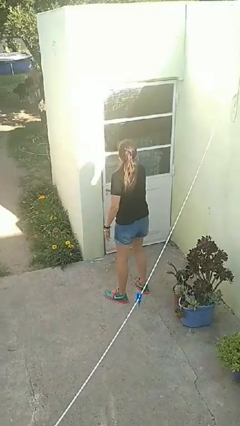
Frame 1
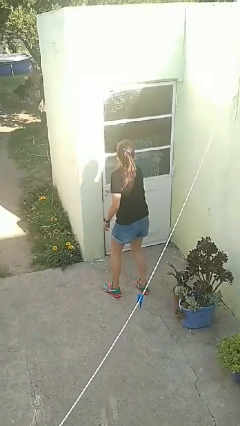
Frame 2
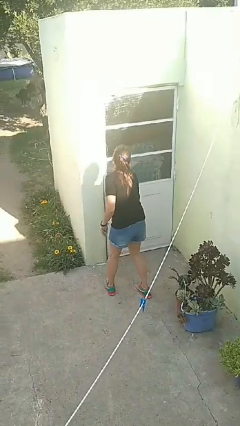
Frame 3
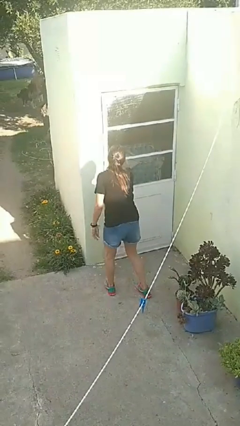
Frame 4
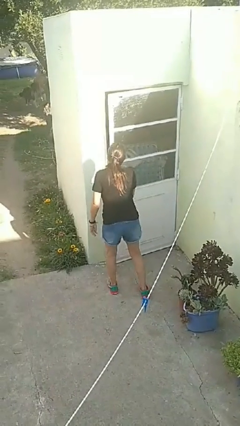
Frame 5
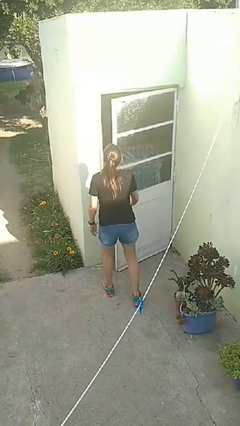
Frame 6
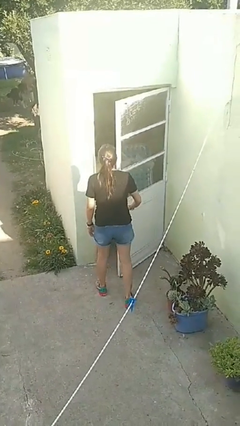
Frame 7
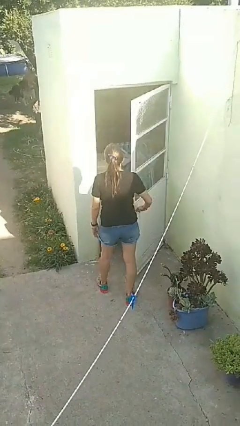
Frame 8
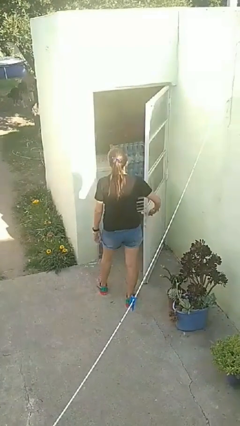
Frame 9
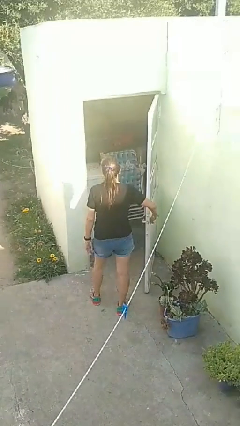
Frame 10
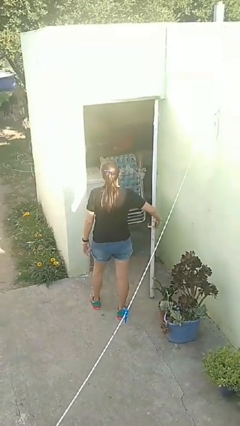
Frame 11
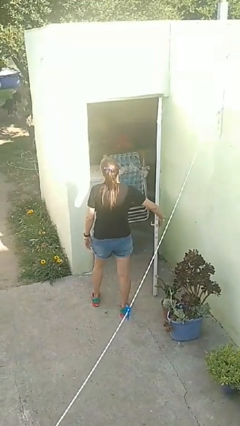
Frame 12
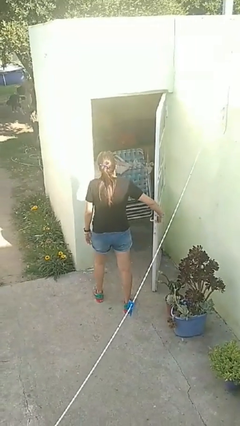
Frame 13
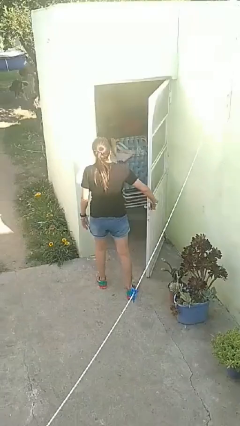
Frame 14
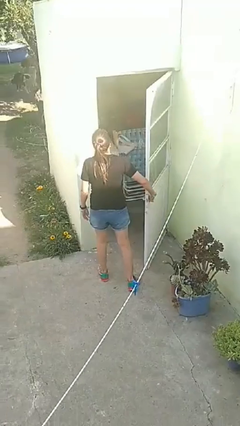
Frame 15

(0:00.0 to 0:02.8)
person opens facility door

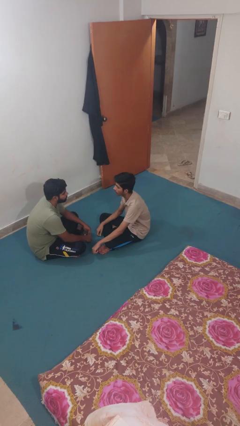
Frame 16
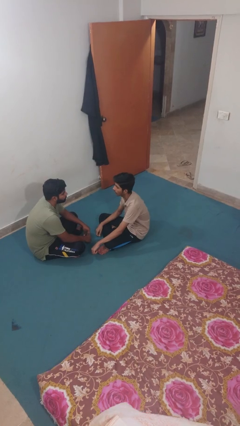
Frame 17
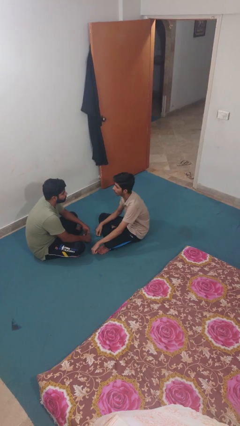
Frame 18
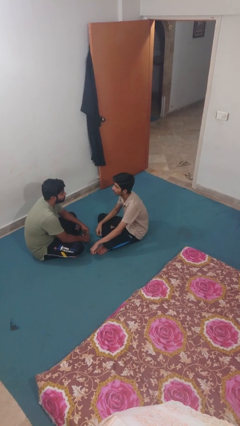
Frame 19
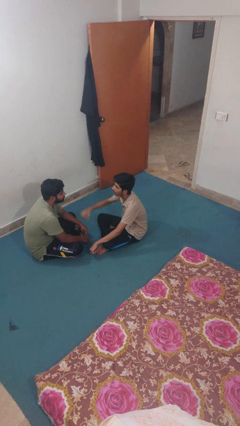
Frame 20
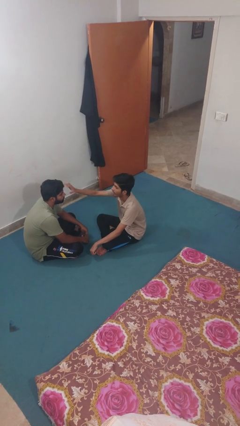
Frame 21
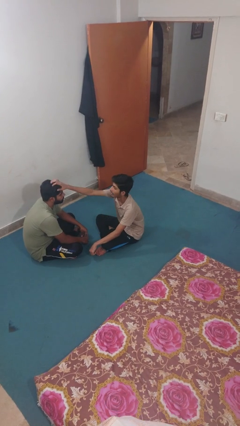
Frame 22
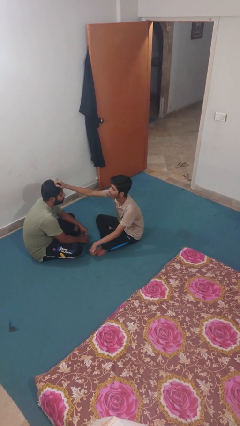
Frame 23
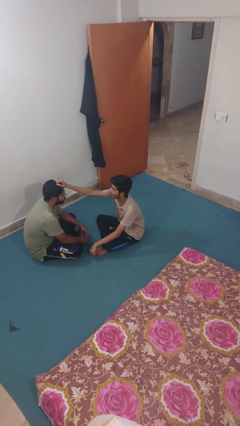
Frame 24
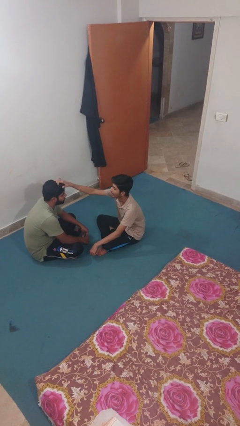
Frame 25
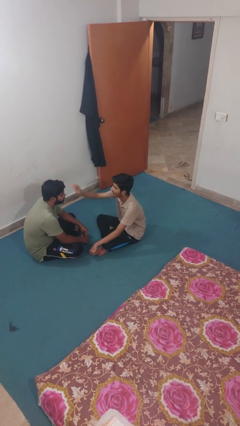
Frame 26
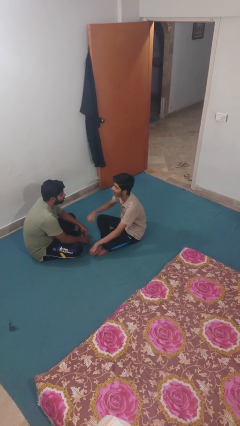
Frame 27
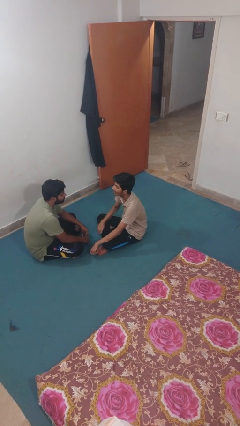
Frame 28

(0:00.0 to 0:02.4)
person grabs person by hair

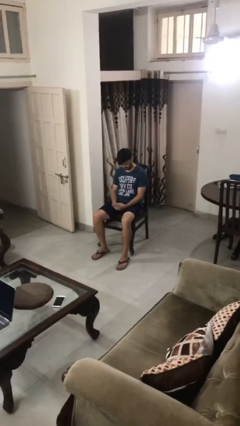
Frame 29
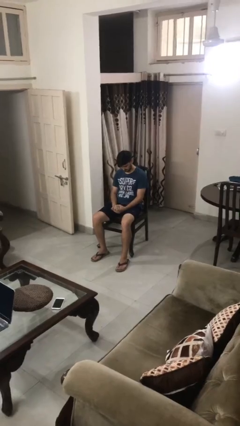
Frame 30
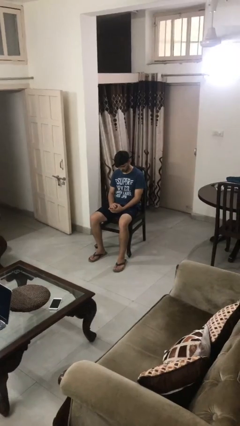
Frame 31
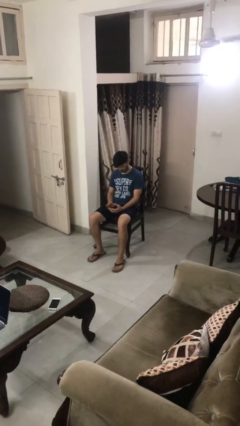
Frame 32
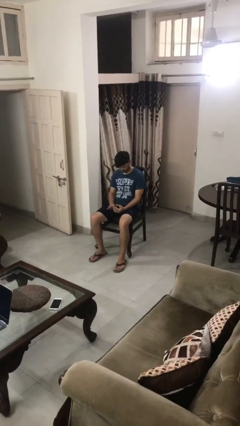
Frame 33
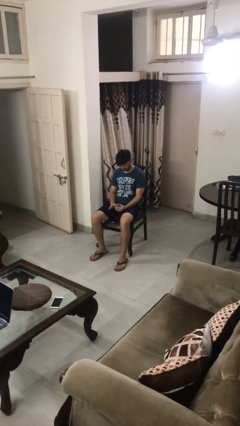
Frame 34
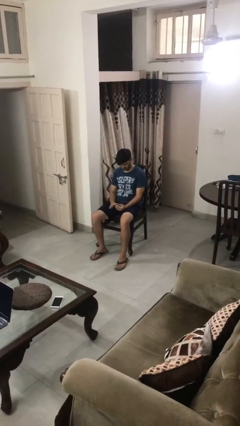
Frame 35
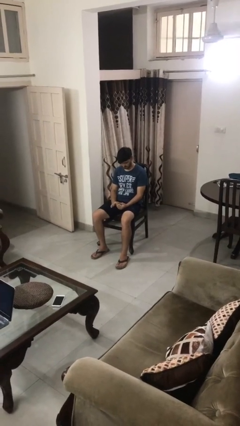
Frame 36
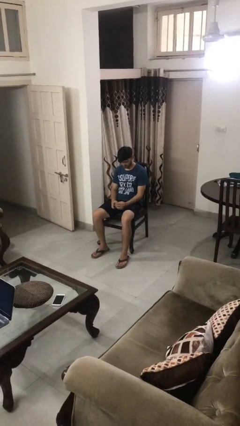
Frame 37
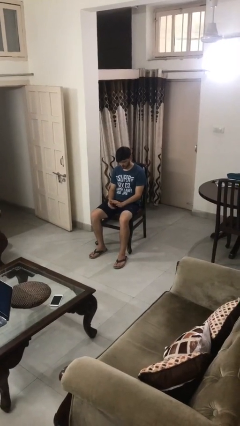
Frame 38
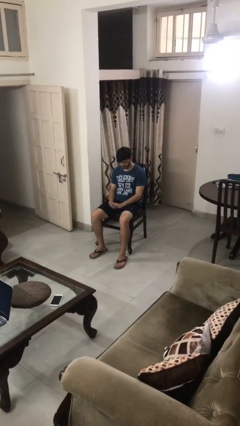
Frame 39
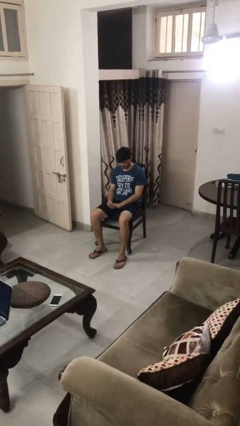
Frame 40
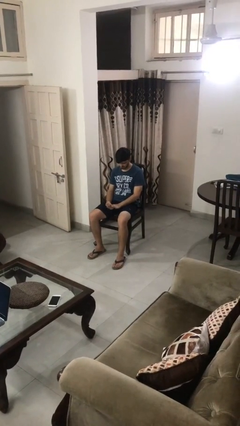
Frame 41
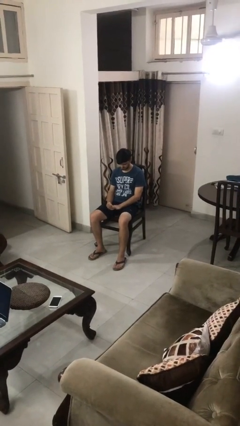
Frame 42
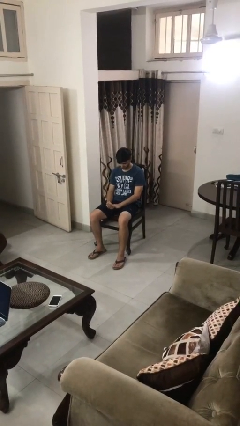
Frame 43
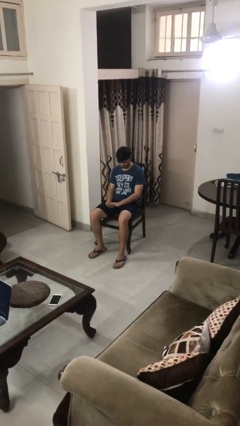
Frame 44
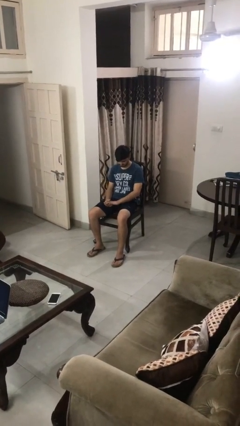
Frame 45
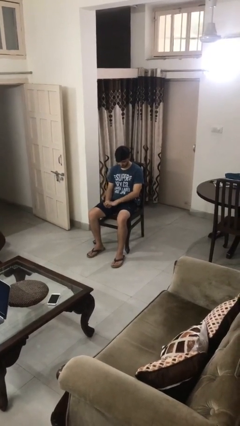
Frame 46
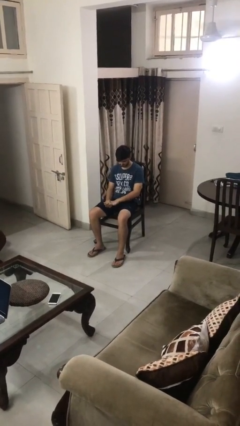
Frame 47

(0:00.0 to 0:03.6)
person looks at hands in lap

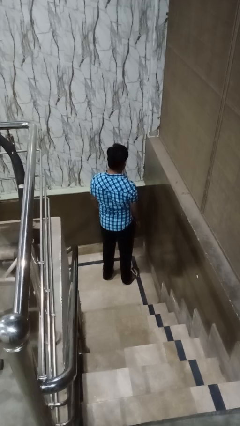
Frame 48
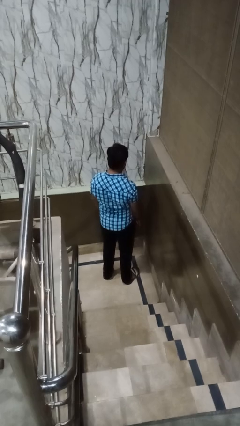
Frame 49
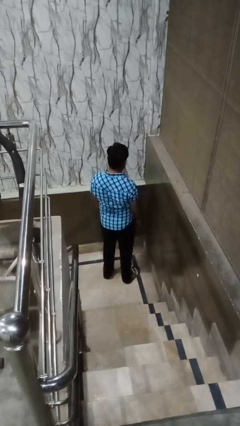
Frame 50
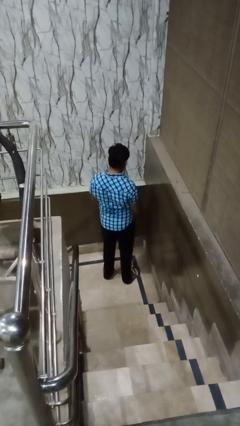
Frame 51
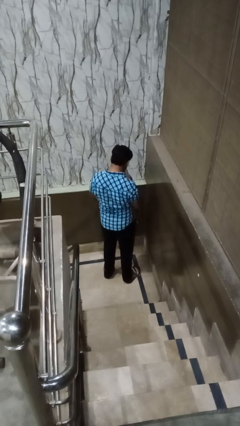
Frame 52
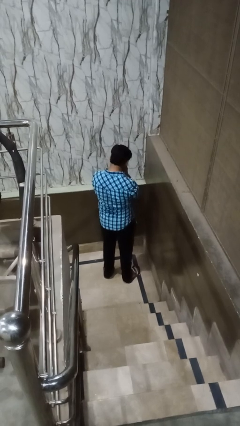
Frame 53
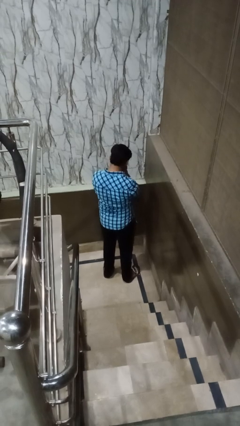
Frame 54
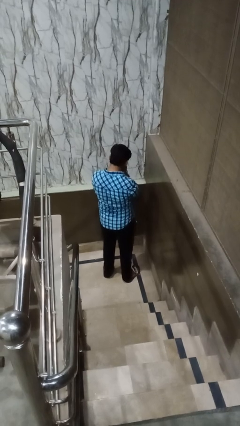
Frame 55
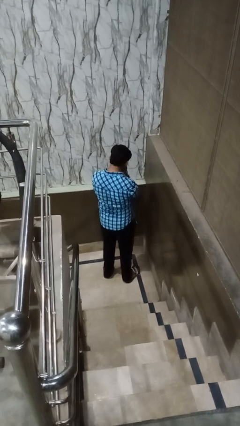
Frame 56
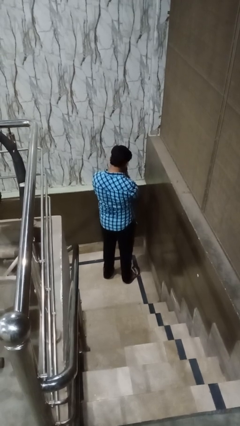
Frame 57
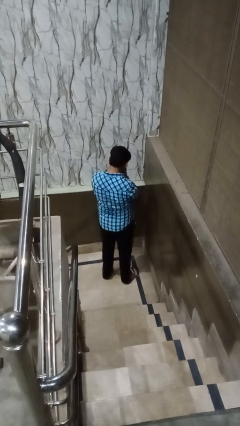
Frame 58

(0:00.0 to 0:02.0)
person sneezes into hand

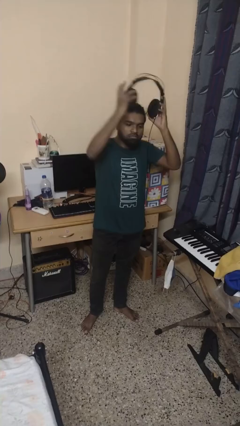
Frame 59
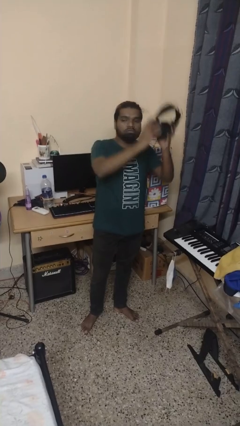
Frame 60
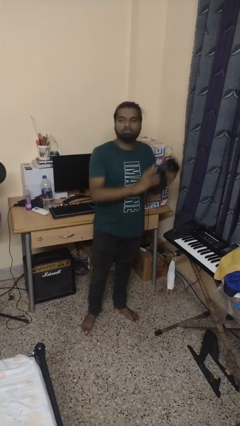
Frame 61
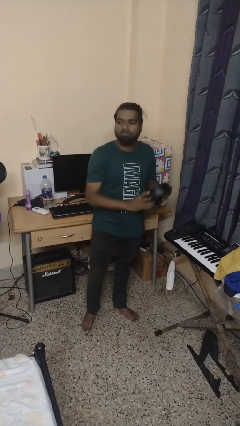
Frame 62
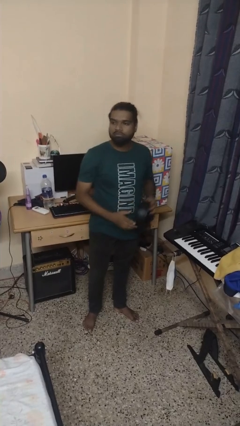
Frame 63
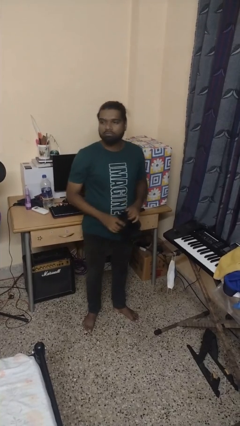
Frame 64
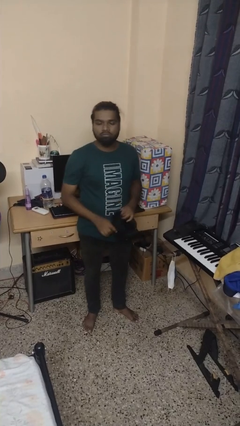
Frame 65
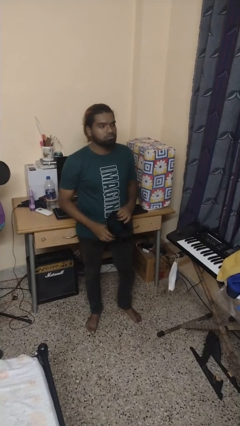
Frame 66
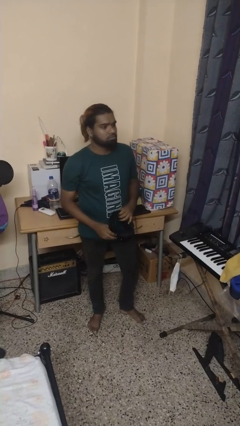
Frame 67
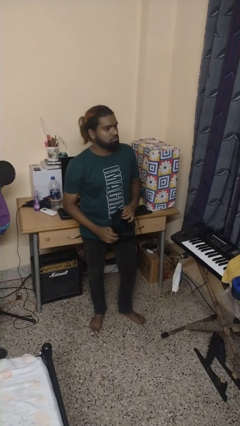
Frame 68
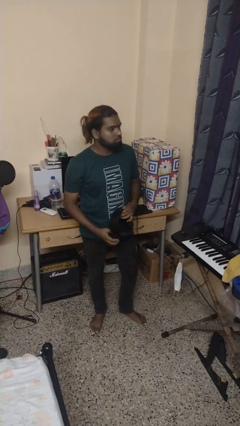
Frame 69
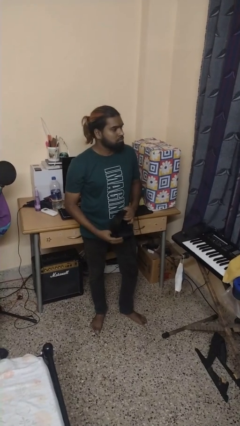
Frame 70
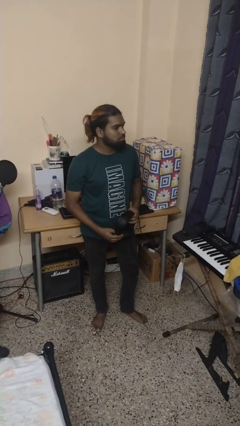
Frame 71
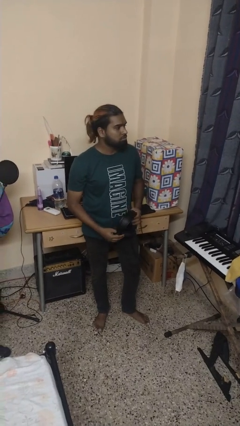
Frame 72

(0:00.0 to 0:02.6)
person takes off headphones

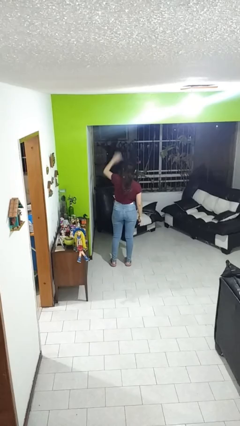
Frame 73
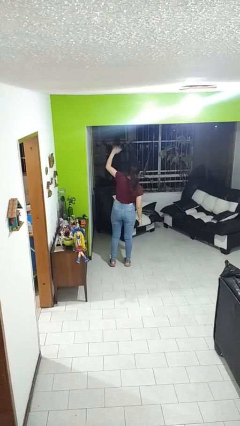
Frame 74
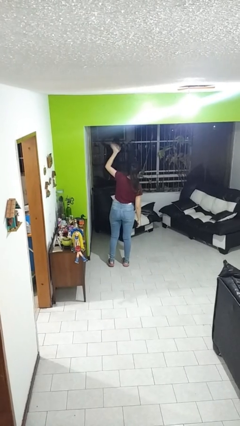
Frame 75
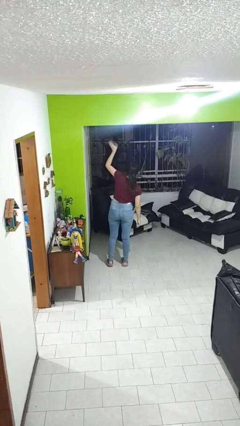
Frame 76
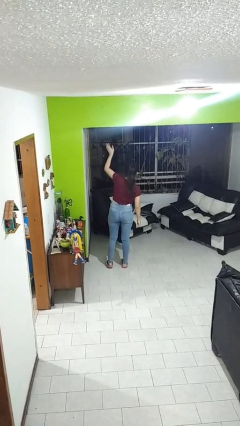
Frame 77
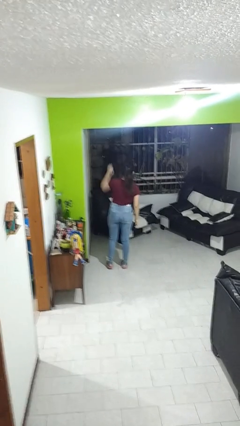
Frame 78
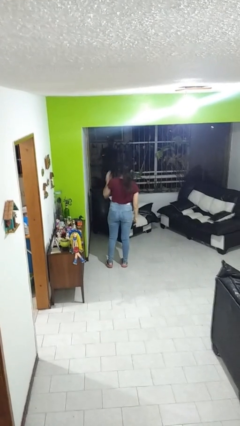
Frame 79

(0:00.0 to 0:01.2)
person waves at person

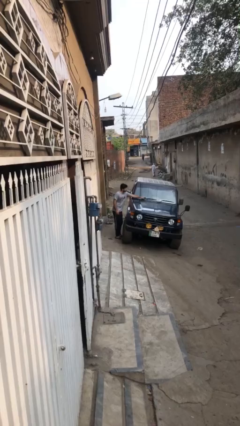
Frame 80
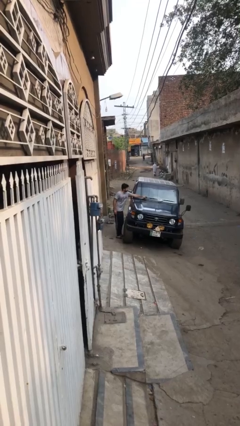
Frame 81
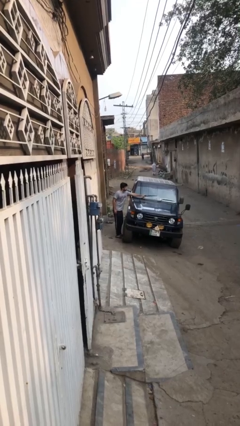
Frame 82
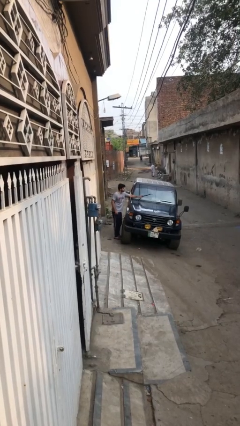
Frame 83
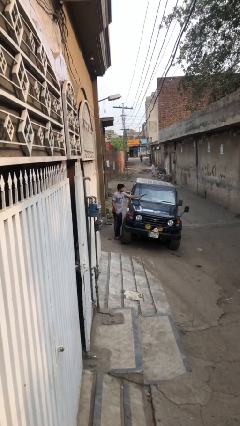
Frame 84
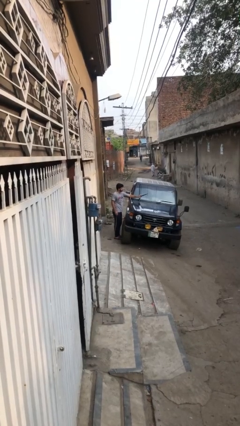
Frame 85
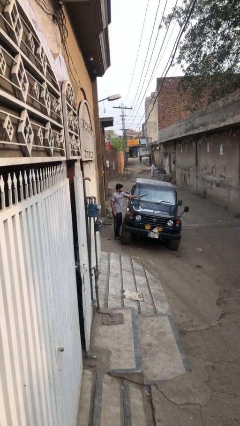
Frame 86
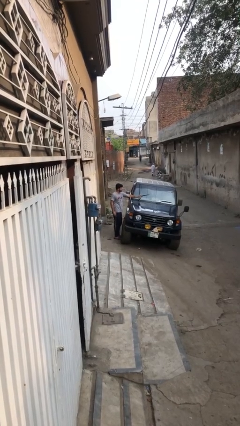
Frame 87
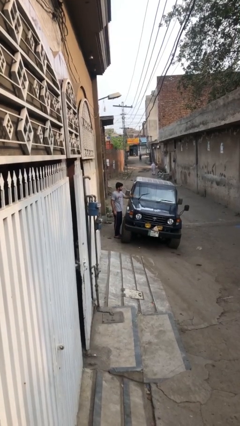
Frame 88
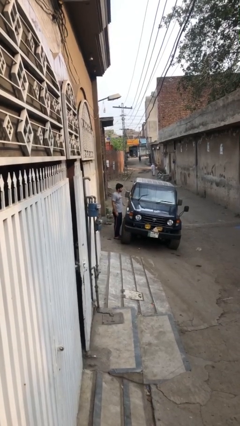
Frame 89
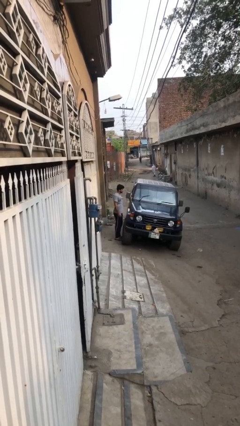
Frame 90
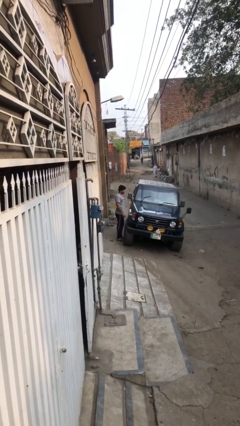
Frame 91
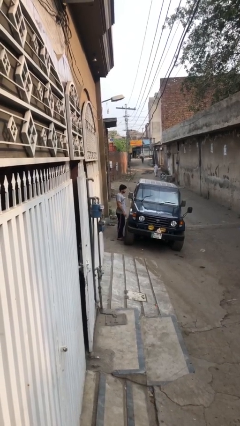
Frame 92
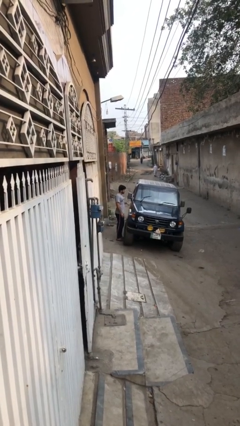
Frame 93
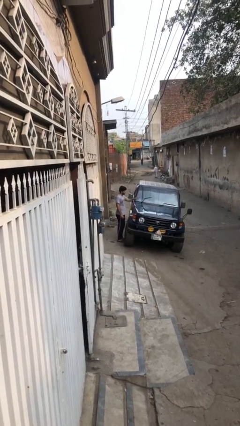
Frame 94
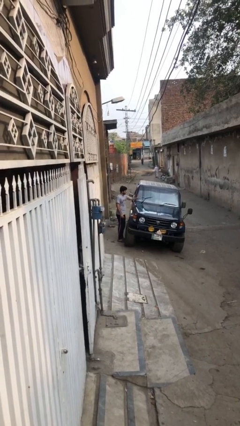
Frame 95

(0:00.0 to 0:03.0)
person flips up car wipers
